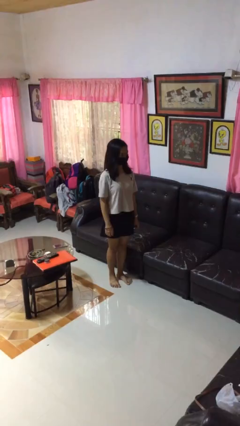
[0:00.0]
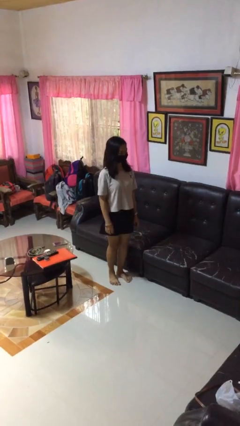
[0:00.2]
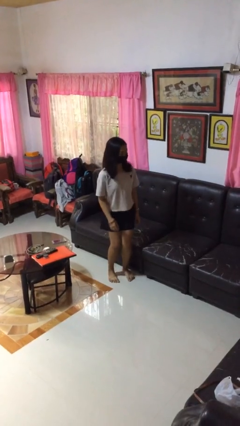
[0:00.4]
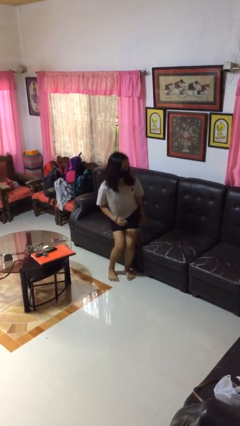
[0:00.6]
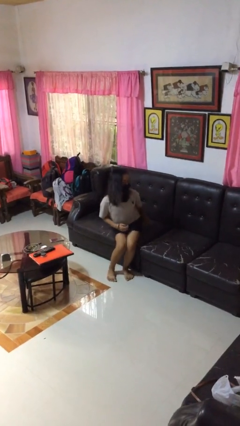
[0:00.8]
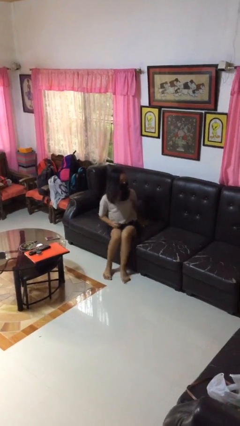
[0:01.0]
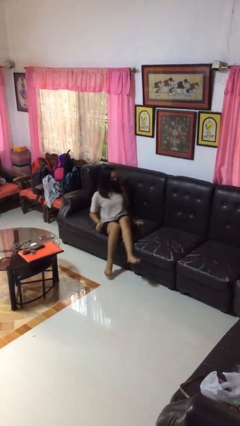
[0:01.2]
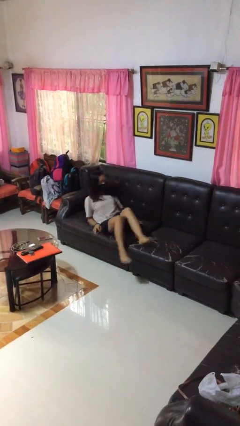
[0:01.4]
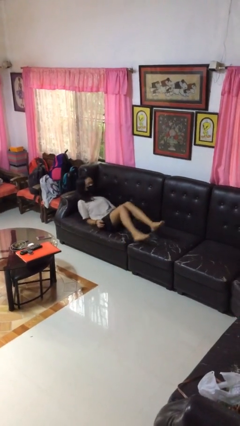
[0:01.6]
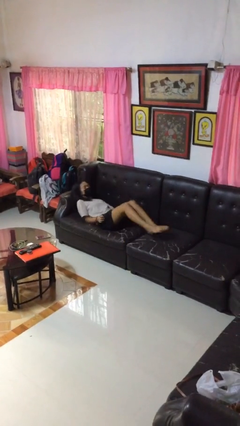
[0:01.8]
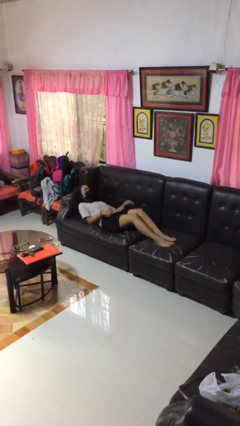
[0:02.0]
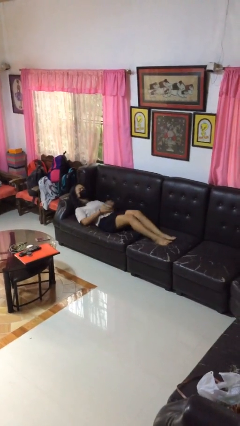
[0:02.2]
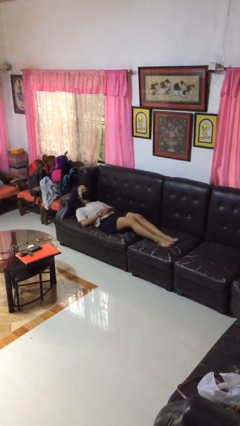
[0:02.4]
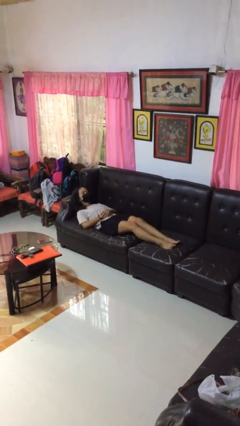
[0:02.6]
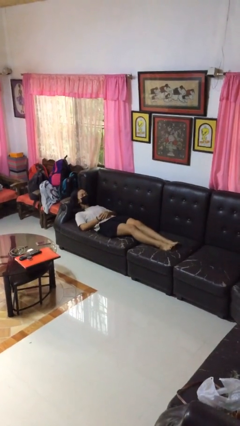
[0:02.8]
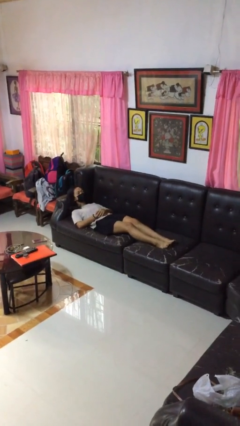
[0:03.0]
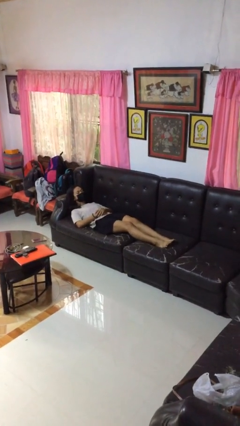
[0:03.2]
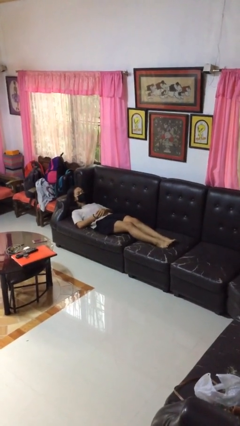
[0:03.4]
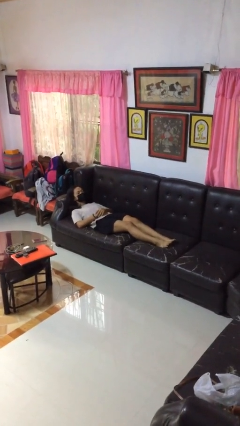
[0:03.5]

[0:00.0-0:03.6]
person lies down on couch

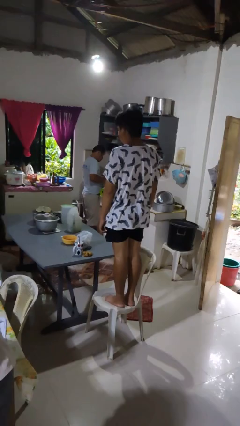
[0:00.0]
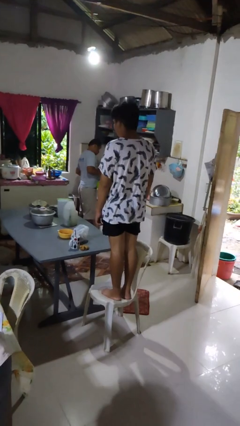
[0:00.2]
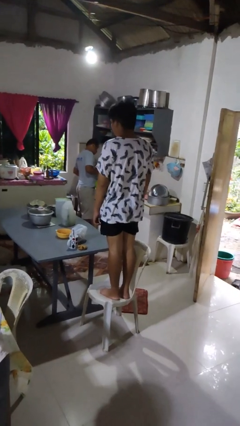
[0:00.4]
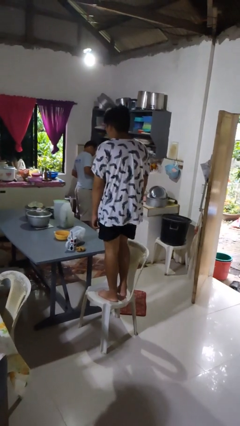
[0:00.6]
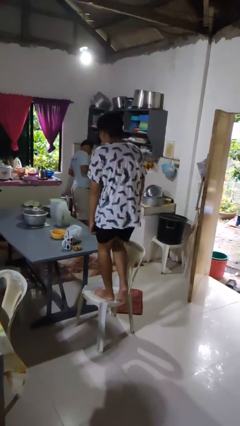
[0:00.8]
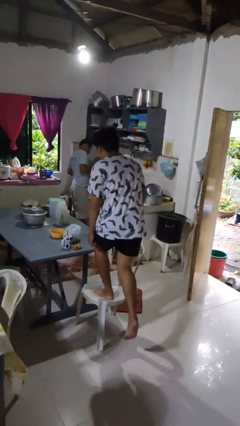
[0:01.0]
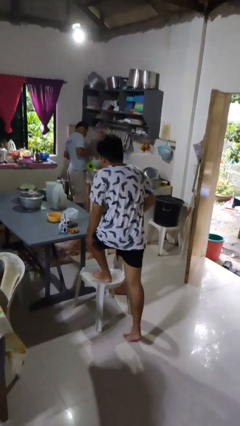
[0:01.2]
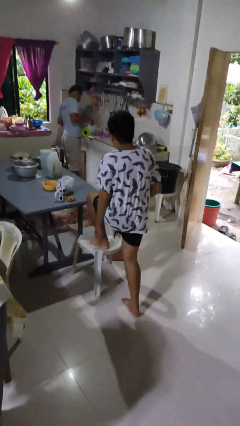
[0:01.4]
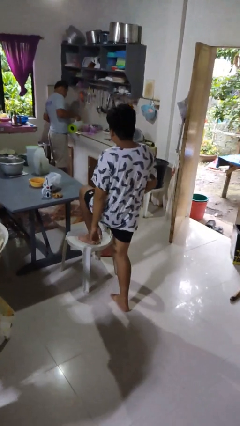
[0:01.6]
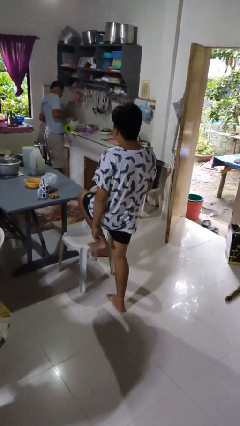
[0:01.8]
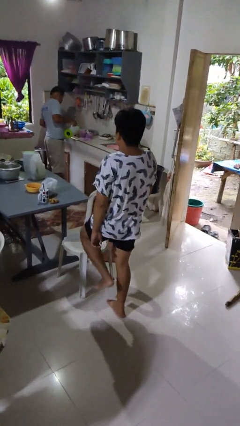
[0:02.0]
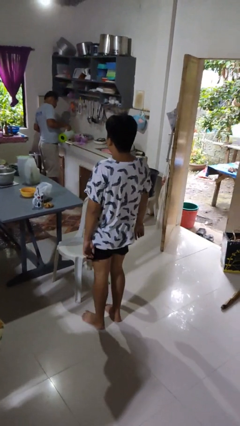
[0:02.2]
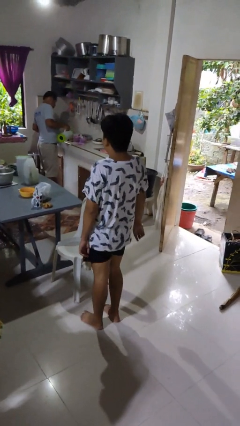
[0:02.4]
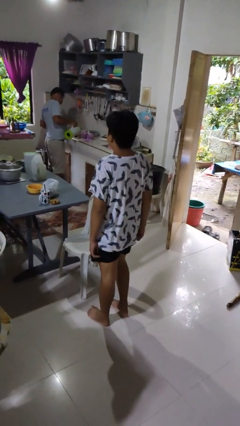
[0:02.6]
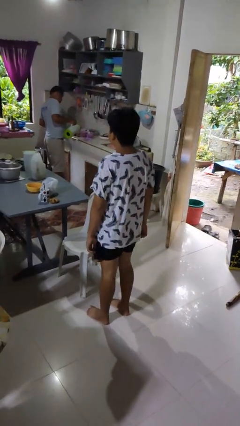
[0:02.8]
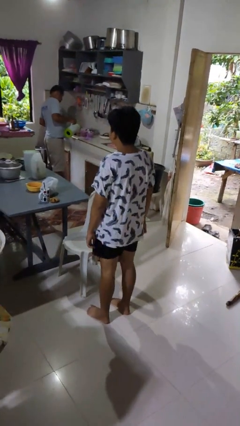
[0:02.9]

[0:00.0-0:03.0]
person climbs off chair

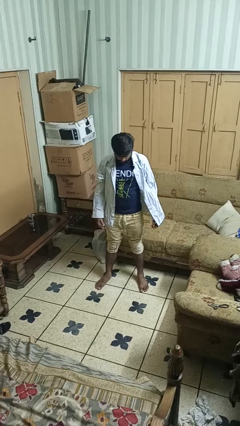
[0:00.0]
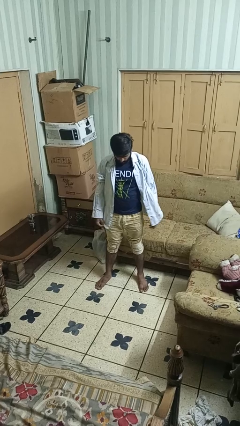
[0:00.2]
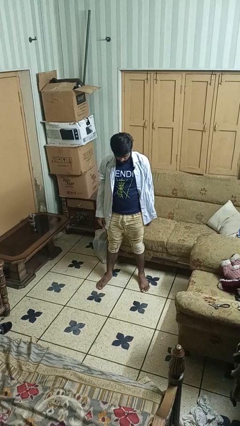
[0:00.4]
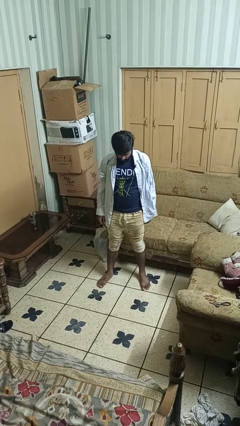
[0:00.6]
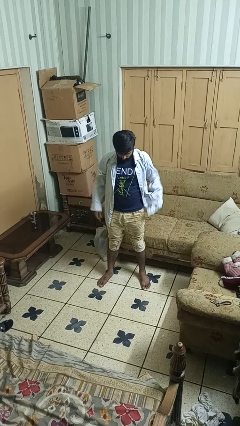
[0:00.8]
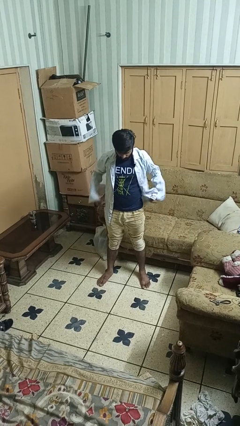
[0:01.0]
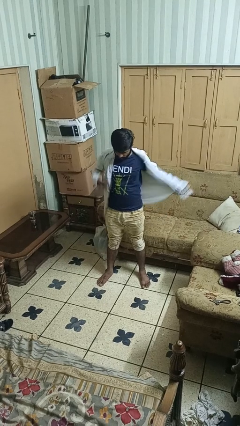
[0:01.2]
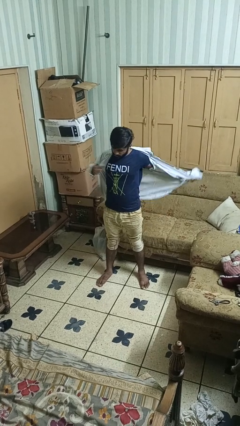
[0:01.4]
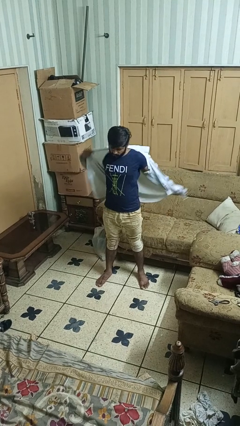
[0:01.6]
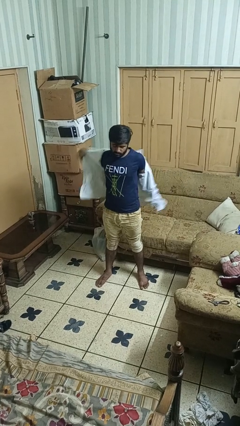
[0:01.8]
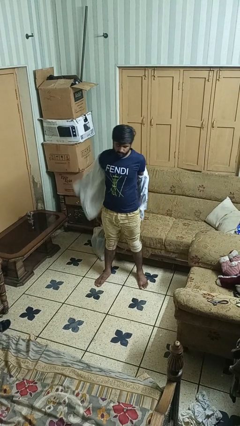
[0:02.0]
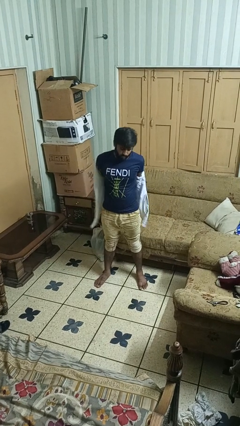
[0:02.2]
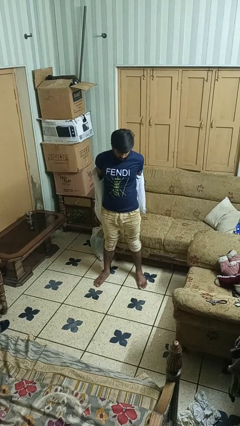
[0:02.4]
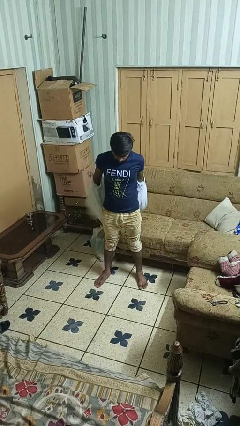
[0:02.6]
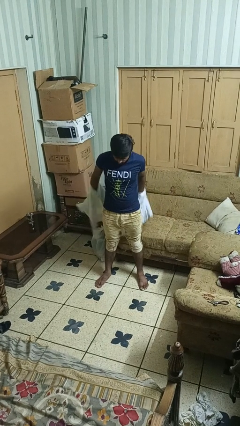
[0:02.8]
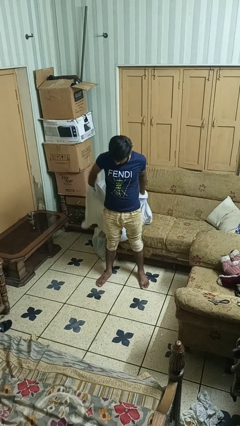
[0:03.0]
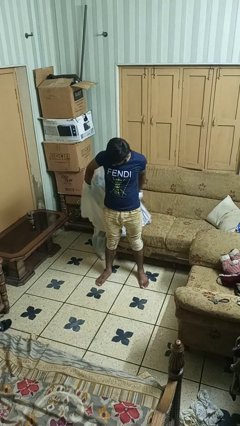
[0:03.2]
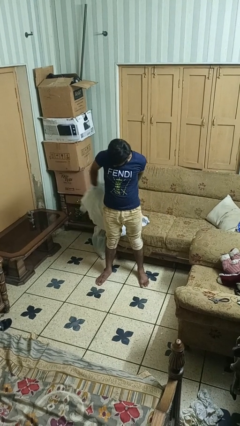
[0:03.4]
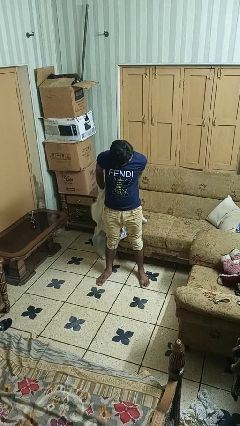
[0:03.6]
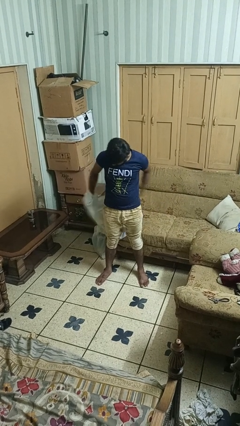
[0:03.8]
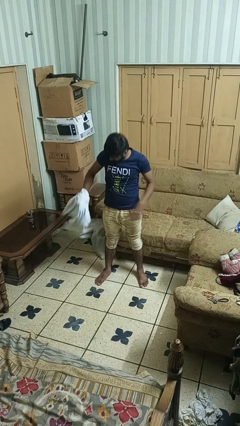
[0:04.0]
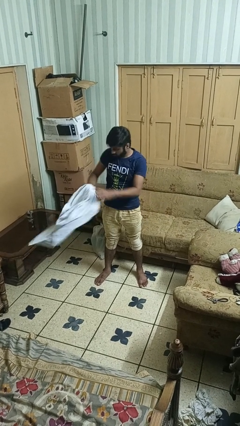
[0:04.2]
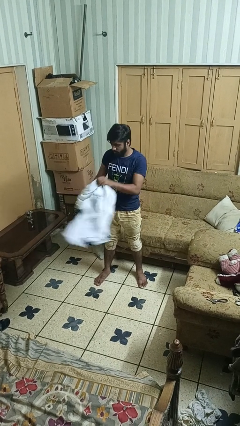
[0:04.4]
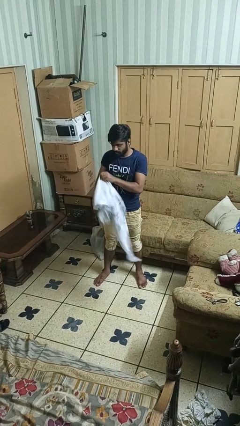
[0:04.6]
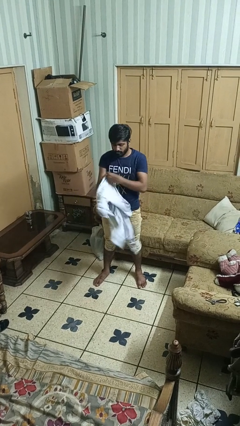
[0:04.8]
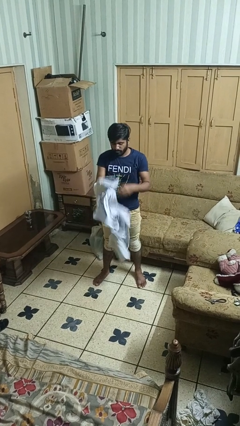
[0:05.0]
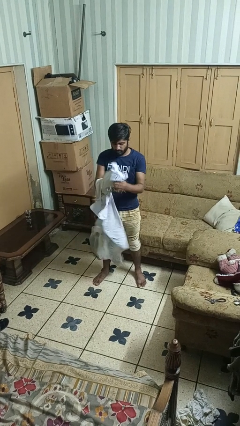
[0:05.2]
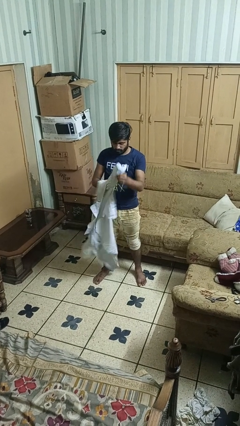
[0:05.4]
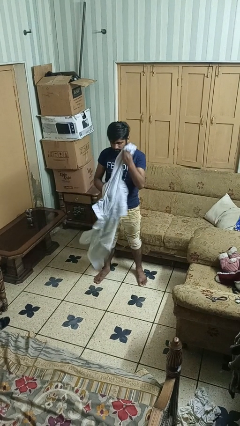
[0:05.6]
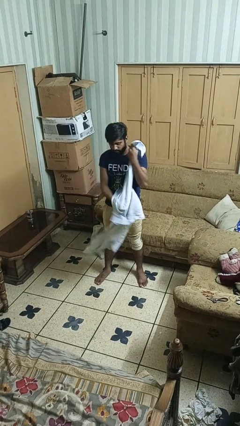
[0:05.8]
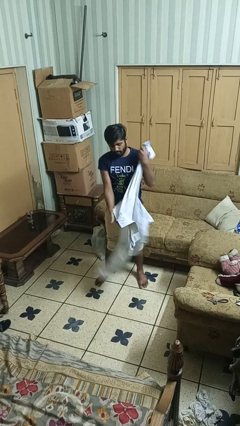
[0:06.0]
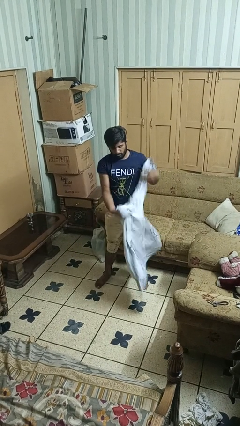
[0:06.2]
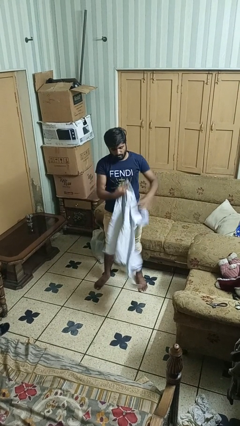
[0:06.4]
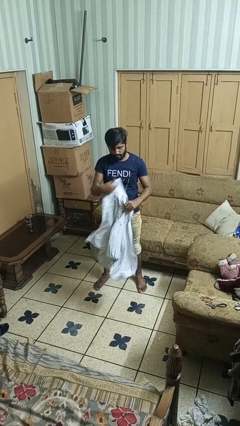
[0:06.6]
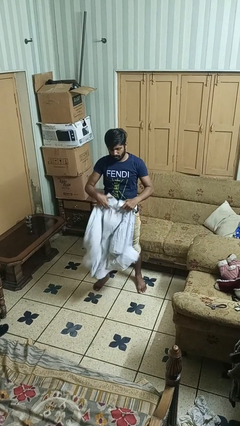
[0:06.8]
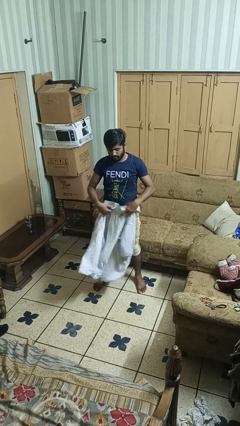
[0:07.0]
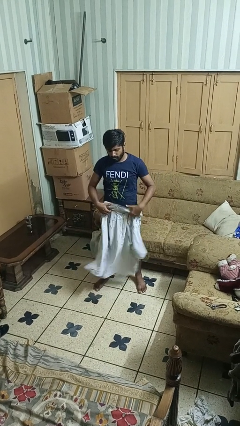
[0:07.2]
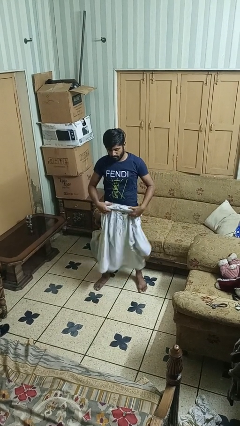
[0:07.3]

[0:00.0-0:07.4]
person takes off shirt

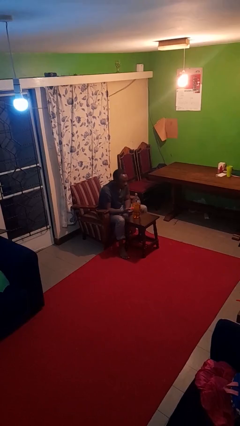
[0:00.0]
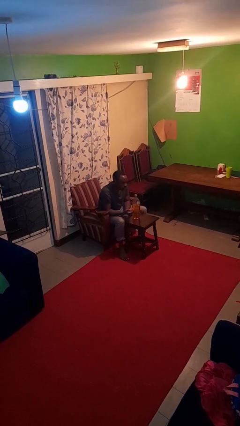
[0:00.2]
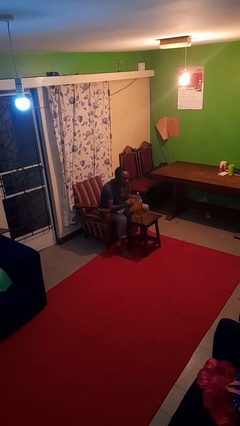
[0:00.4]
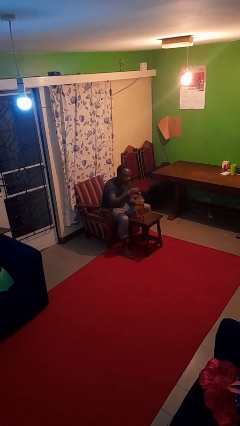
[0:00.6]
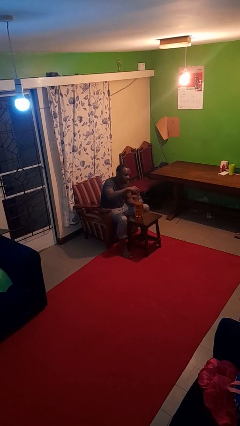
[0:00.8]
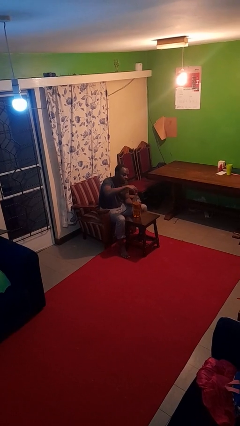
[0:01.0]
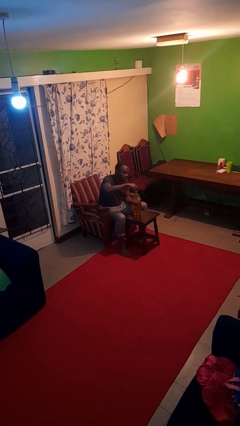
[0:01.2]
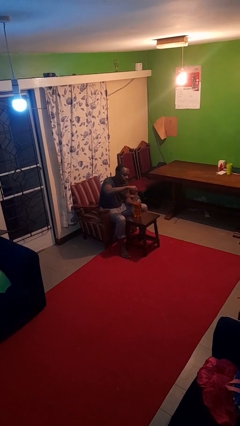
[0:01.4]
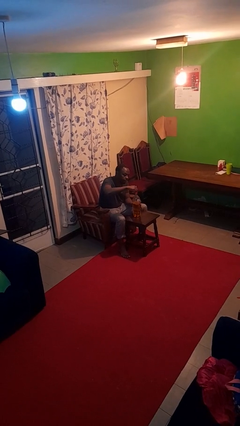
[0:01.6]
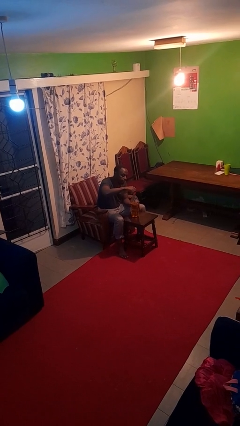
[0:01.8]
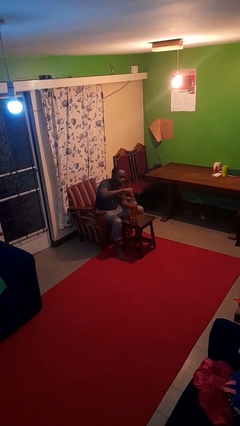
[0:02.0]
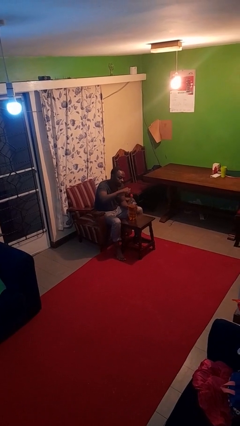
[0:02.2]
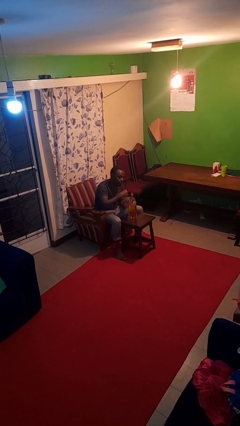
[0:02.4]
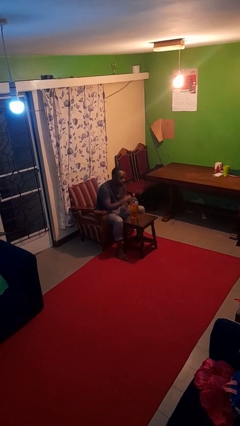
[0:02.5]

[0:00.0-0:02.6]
person screws lid to bottle

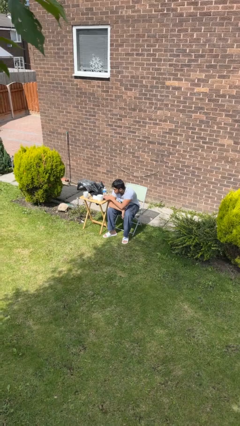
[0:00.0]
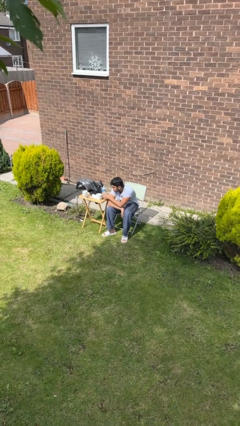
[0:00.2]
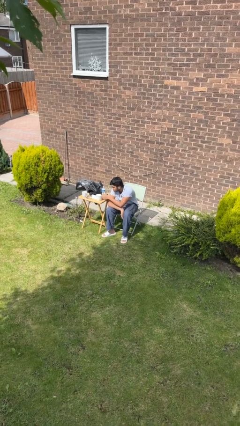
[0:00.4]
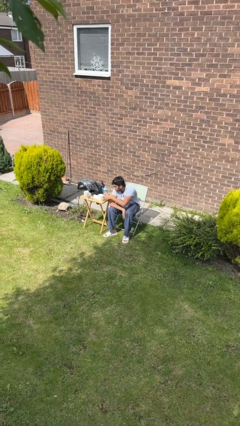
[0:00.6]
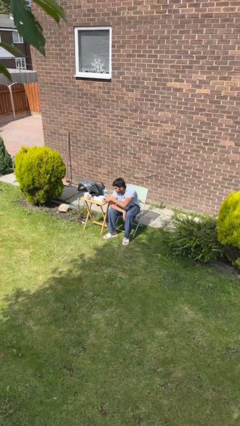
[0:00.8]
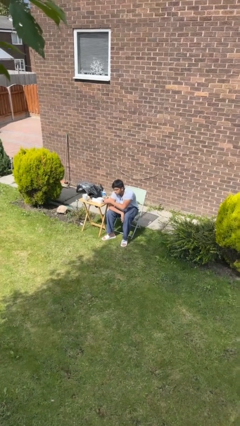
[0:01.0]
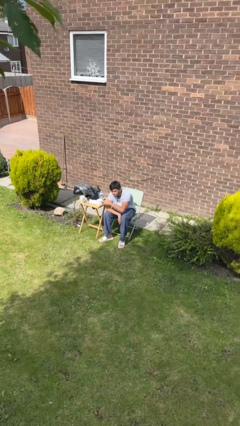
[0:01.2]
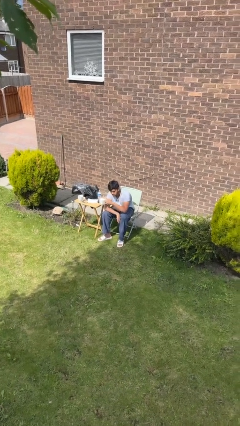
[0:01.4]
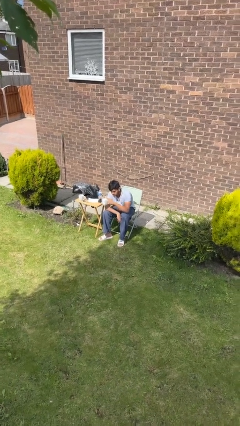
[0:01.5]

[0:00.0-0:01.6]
person picks up object from table
